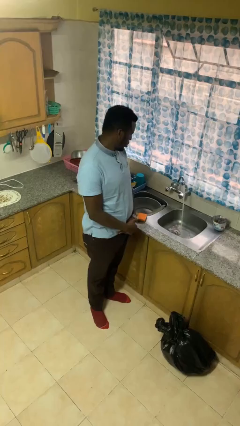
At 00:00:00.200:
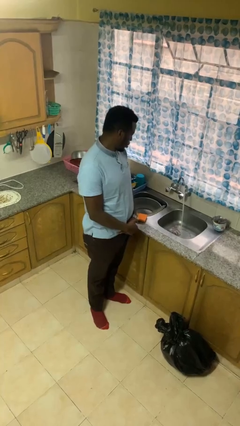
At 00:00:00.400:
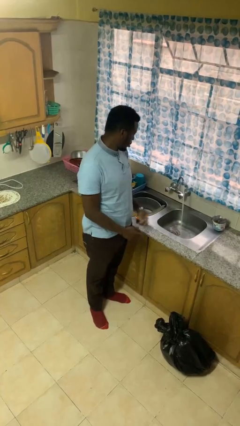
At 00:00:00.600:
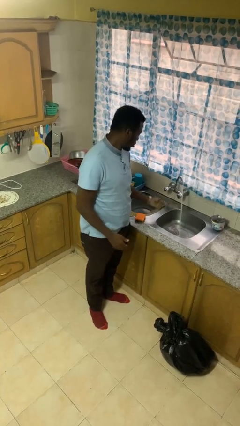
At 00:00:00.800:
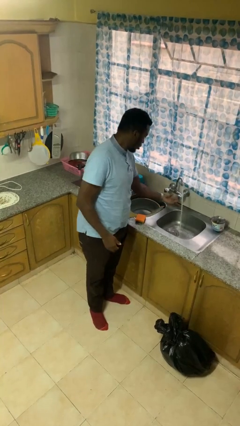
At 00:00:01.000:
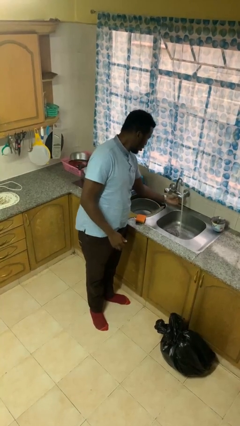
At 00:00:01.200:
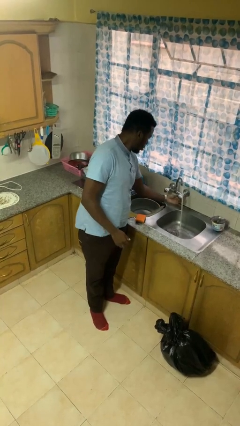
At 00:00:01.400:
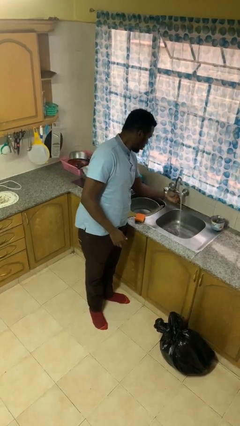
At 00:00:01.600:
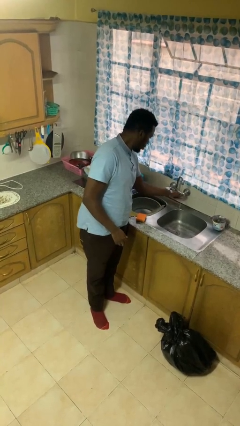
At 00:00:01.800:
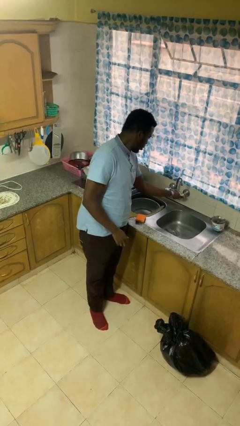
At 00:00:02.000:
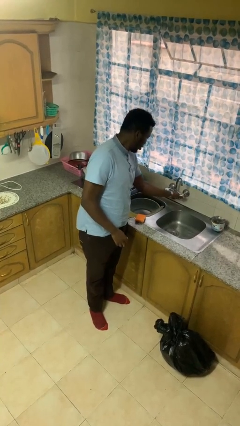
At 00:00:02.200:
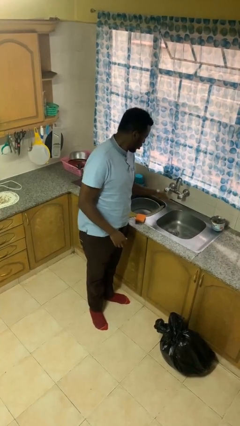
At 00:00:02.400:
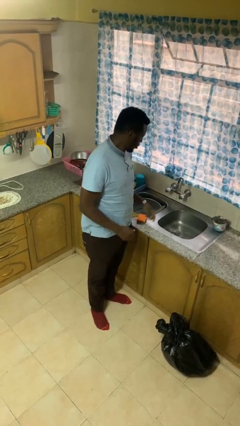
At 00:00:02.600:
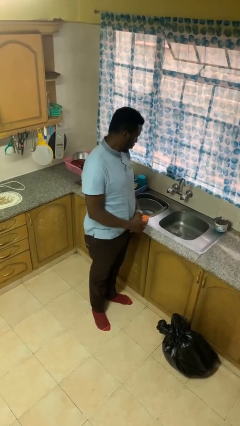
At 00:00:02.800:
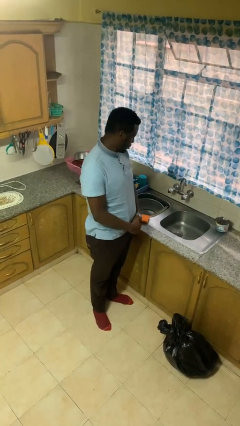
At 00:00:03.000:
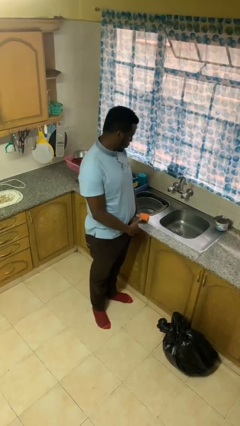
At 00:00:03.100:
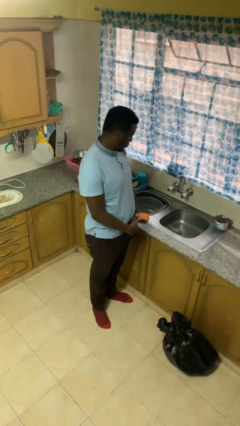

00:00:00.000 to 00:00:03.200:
person turns off faucet

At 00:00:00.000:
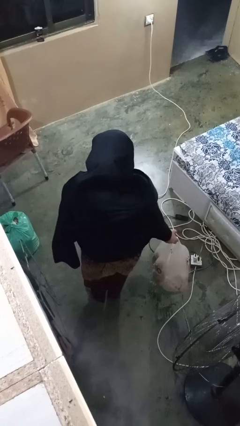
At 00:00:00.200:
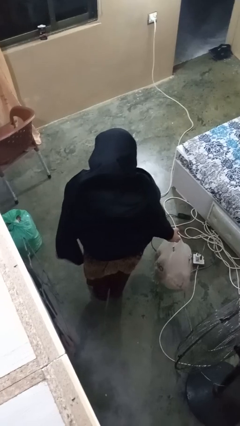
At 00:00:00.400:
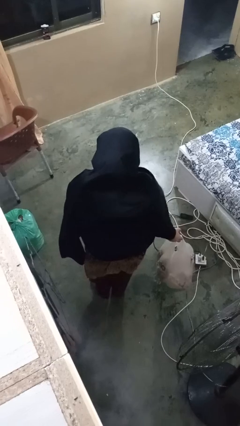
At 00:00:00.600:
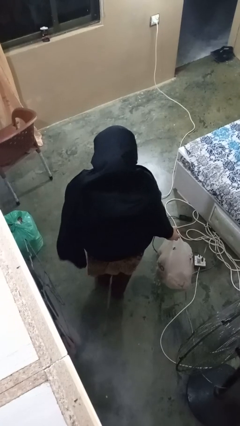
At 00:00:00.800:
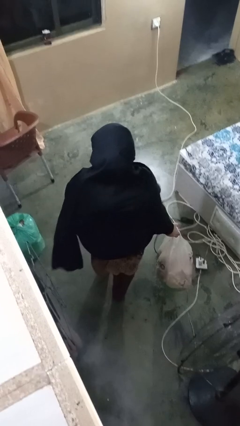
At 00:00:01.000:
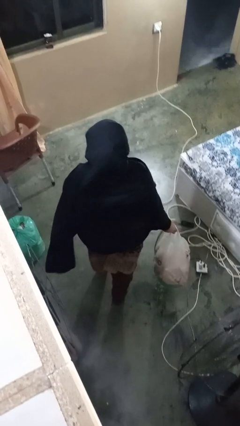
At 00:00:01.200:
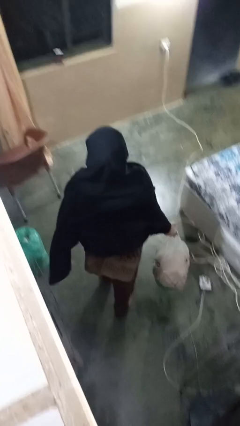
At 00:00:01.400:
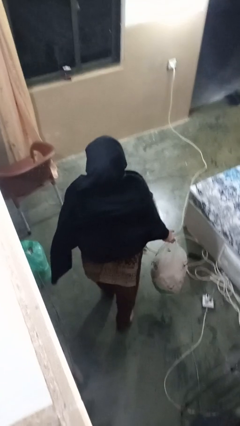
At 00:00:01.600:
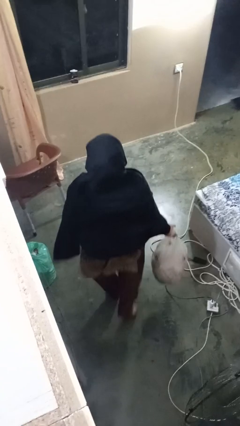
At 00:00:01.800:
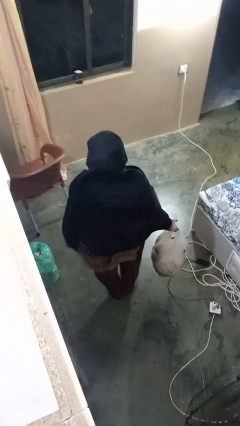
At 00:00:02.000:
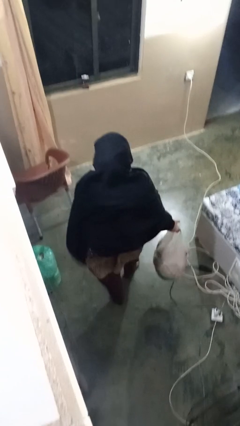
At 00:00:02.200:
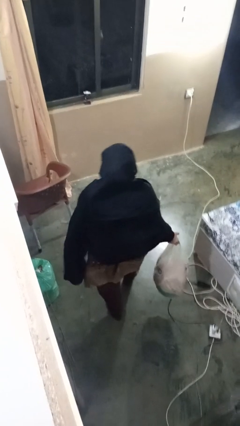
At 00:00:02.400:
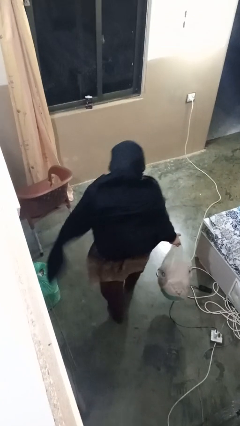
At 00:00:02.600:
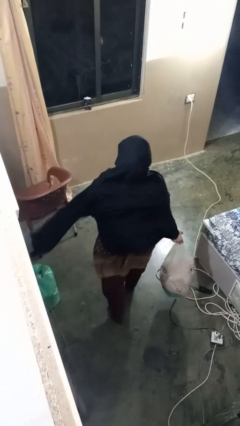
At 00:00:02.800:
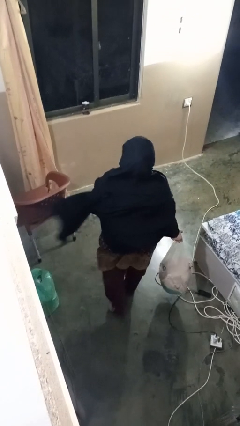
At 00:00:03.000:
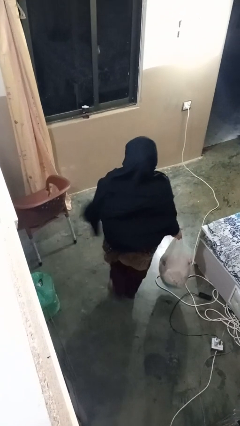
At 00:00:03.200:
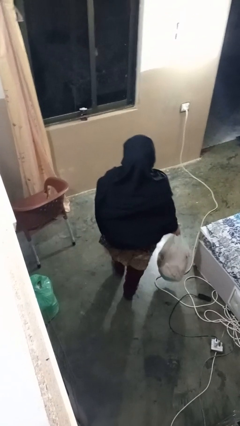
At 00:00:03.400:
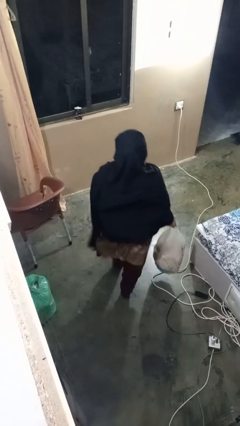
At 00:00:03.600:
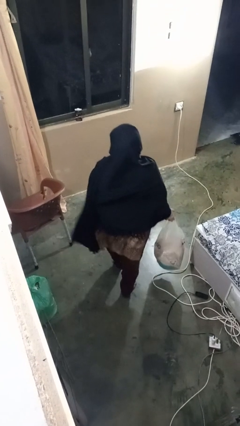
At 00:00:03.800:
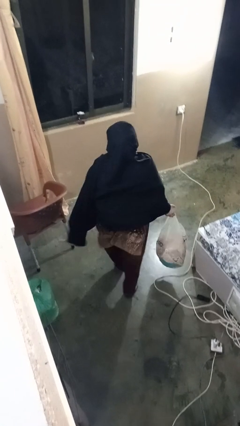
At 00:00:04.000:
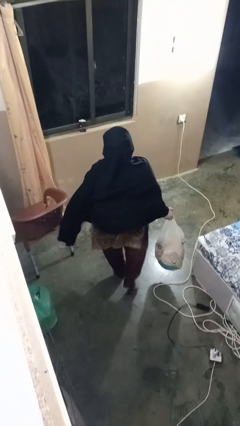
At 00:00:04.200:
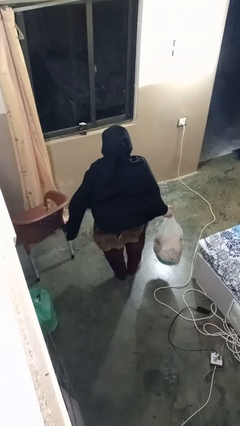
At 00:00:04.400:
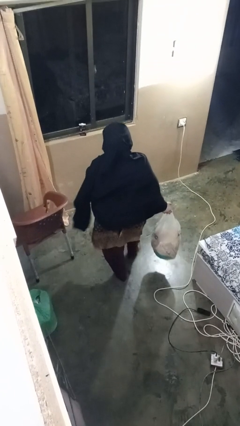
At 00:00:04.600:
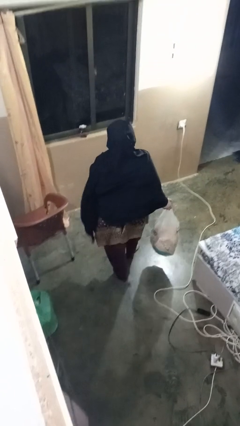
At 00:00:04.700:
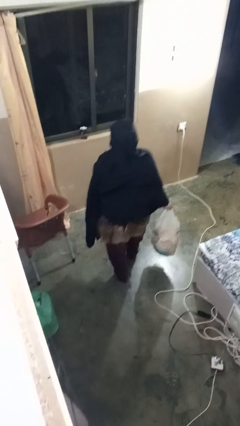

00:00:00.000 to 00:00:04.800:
person carries groceries
